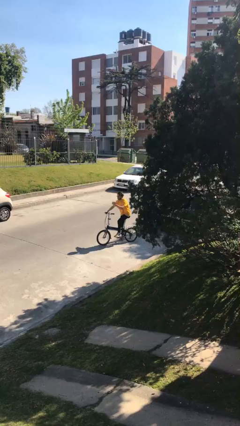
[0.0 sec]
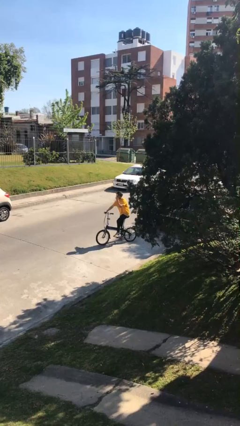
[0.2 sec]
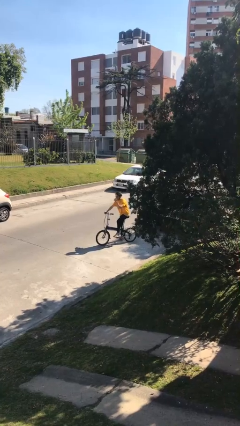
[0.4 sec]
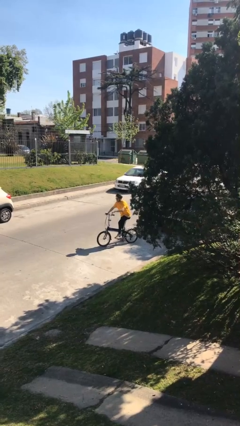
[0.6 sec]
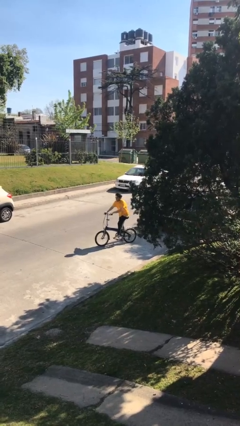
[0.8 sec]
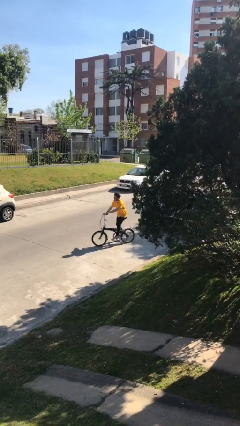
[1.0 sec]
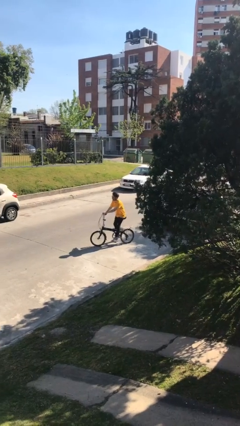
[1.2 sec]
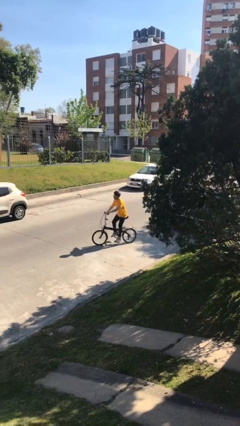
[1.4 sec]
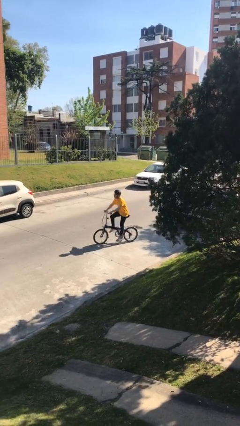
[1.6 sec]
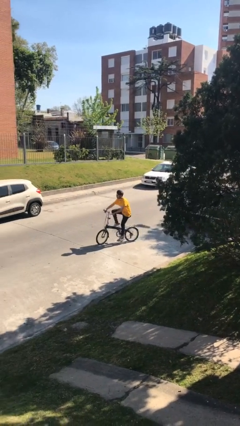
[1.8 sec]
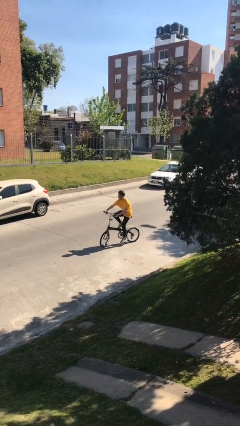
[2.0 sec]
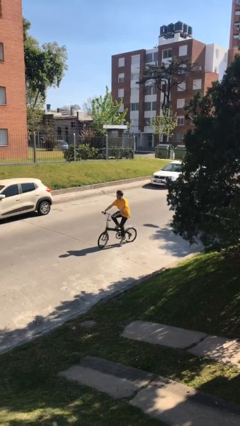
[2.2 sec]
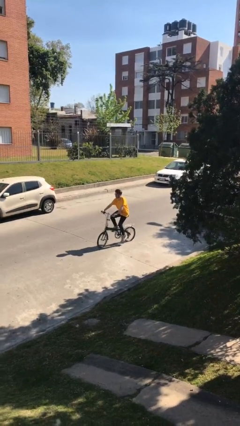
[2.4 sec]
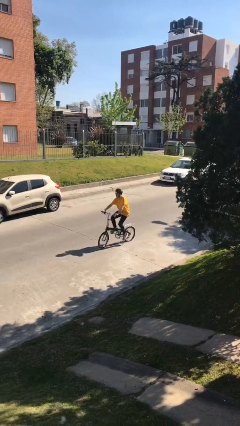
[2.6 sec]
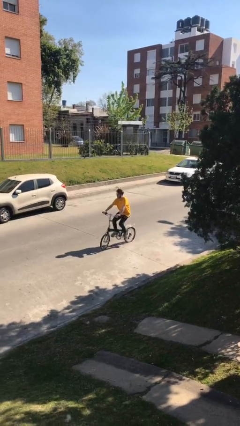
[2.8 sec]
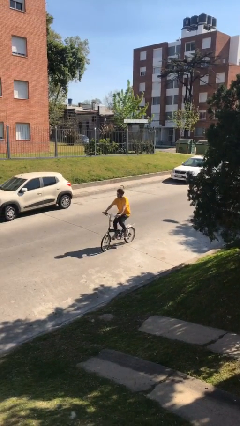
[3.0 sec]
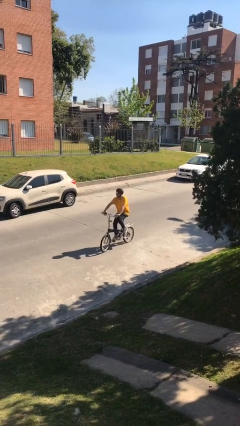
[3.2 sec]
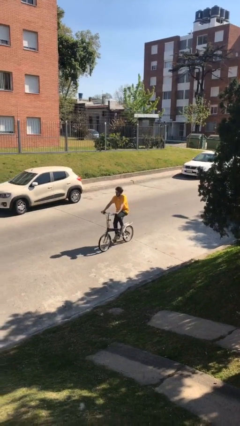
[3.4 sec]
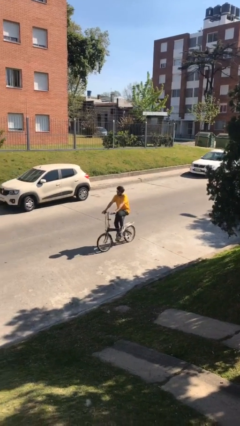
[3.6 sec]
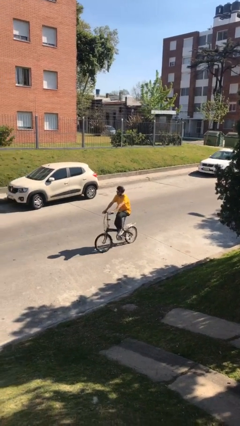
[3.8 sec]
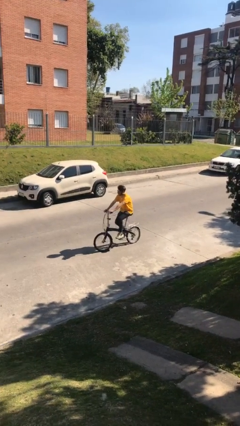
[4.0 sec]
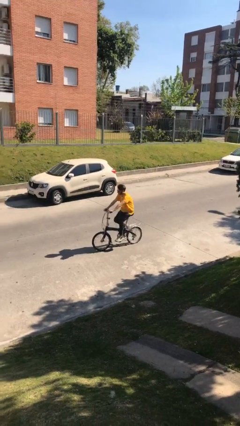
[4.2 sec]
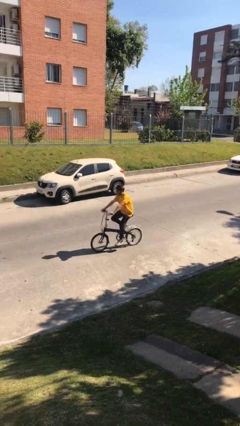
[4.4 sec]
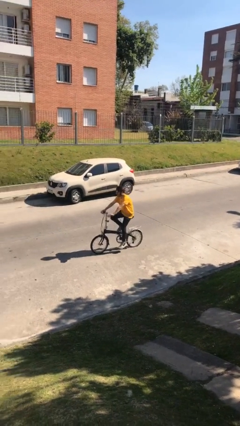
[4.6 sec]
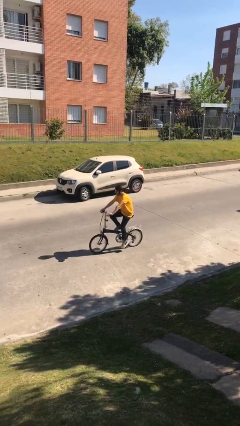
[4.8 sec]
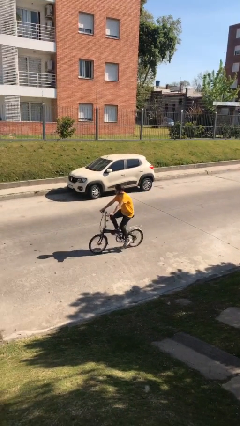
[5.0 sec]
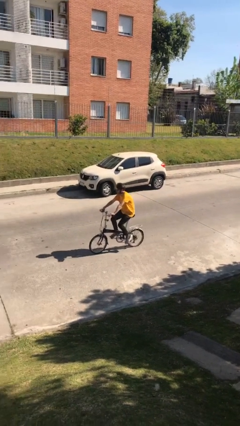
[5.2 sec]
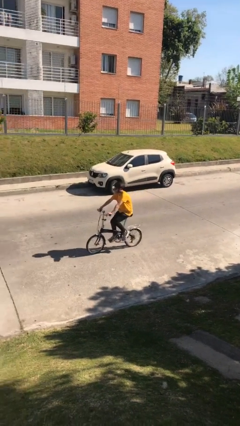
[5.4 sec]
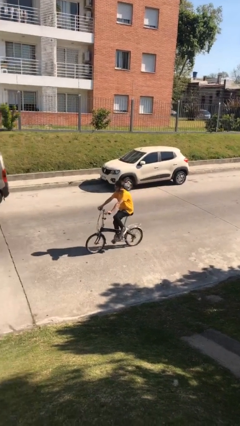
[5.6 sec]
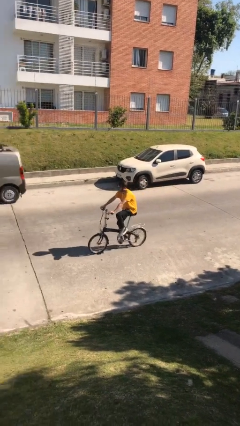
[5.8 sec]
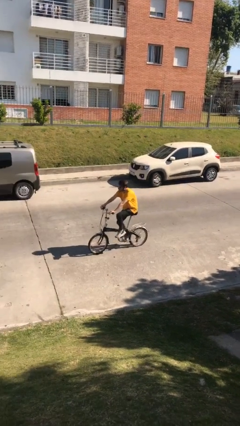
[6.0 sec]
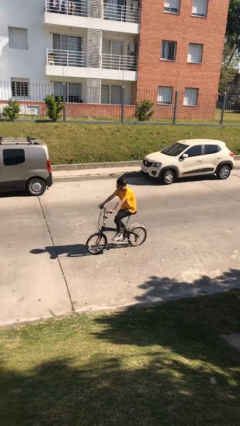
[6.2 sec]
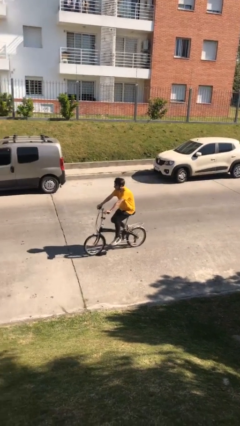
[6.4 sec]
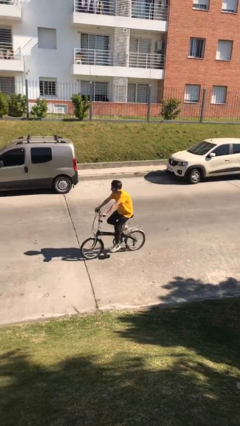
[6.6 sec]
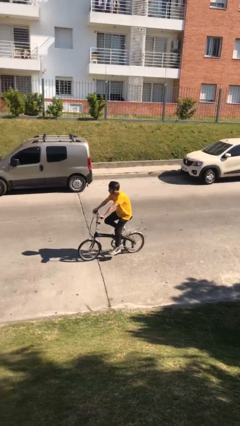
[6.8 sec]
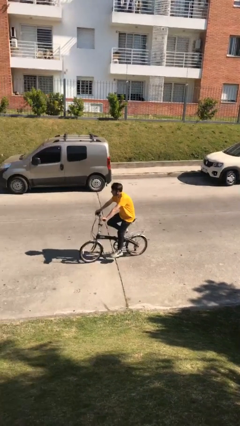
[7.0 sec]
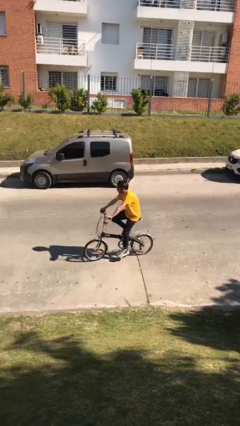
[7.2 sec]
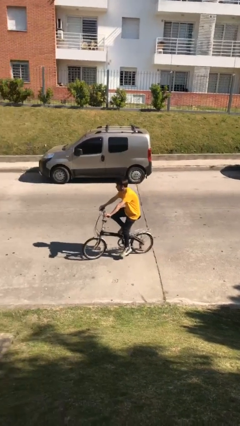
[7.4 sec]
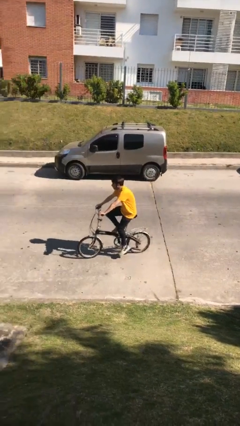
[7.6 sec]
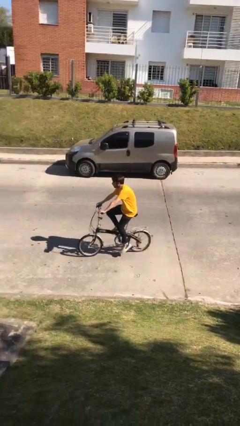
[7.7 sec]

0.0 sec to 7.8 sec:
person rides bicycle

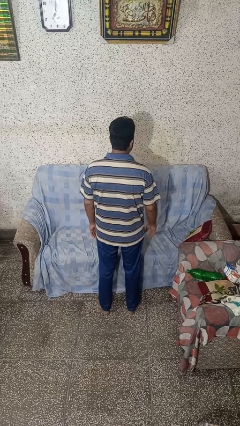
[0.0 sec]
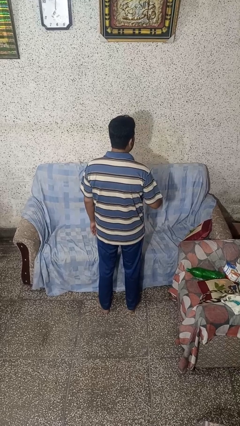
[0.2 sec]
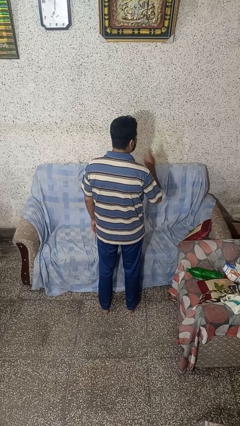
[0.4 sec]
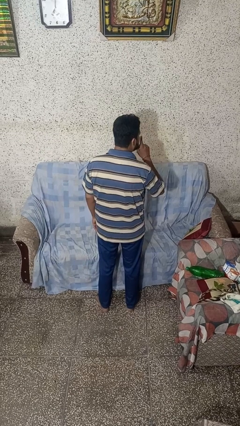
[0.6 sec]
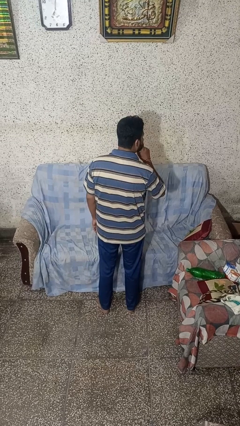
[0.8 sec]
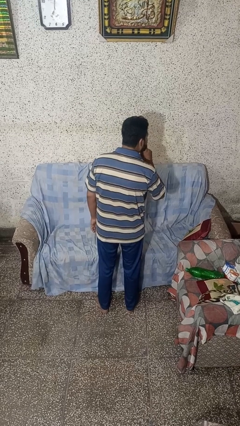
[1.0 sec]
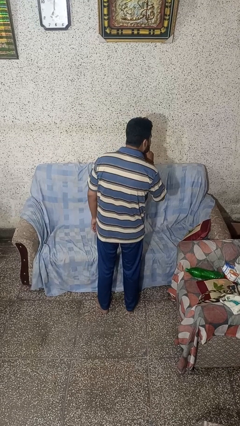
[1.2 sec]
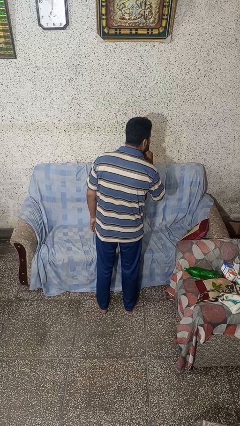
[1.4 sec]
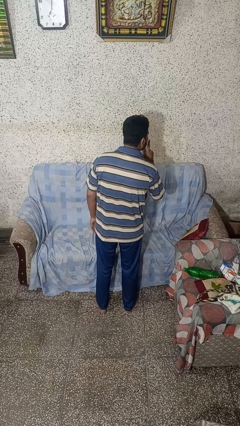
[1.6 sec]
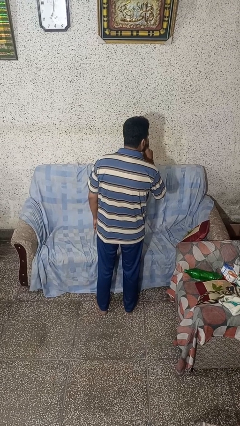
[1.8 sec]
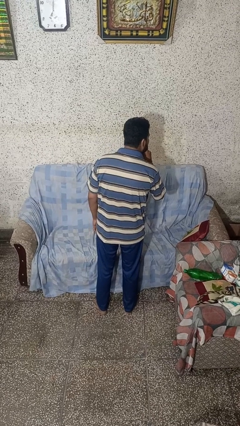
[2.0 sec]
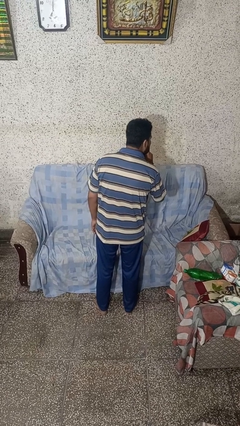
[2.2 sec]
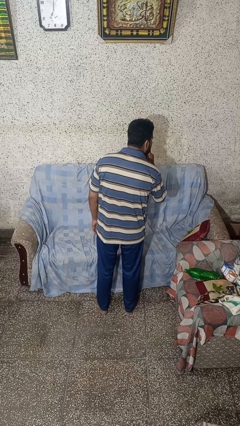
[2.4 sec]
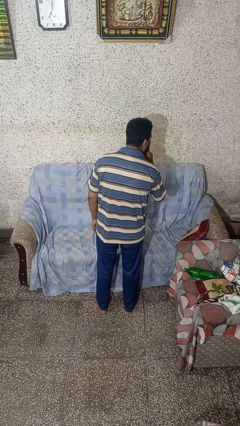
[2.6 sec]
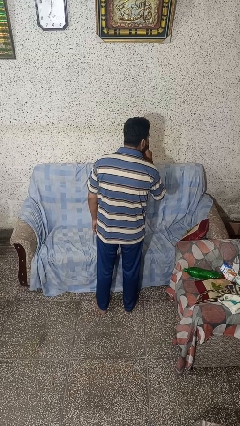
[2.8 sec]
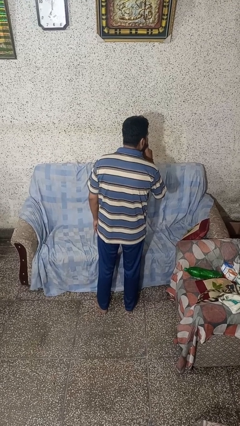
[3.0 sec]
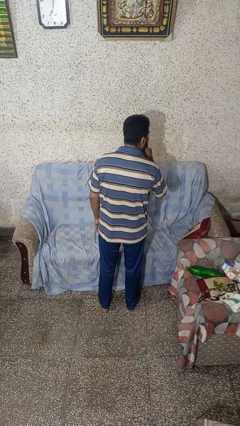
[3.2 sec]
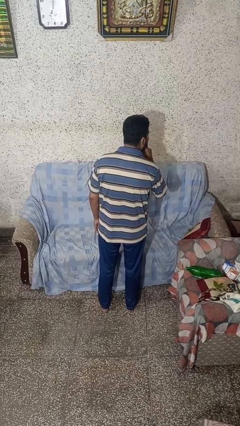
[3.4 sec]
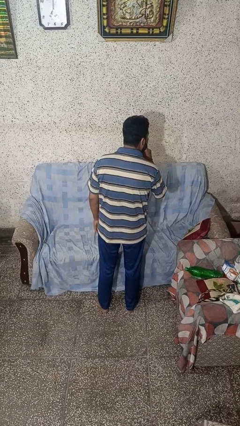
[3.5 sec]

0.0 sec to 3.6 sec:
person gestures be quiet

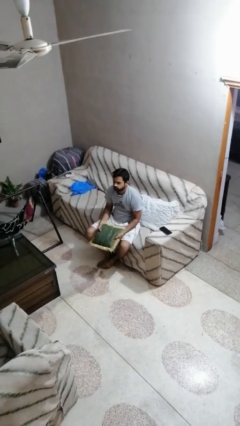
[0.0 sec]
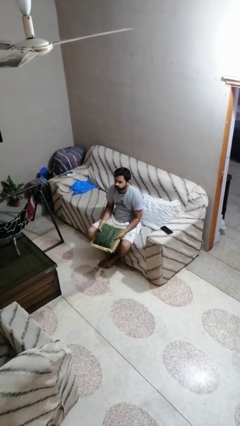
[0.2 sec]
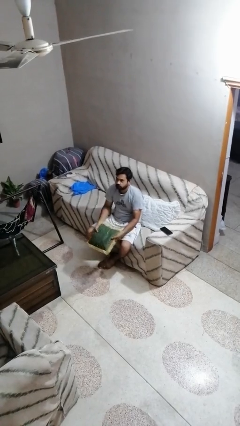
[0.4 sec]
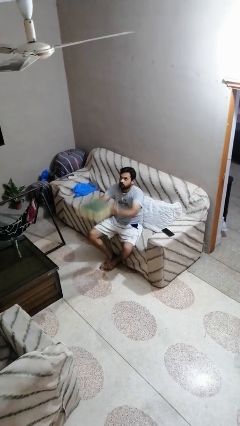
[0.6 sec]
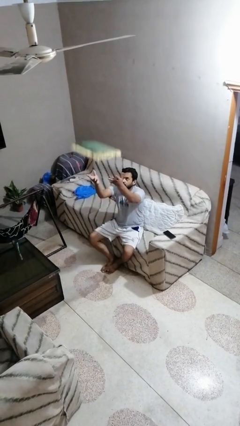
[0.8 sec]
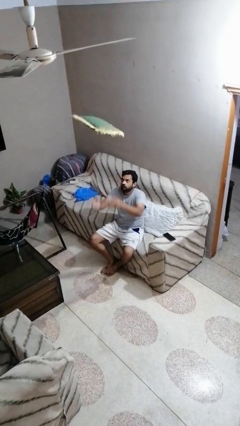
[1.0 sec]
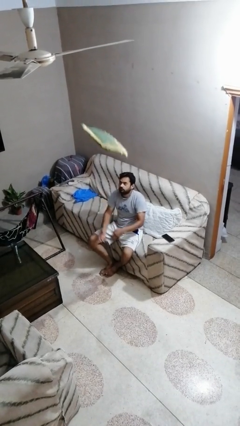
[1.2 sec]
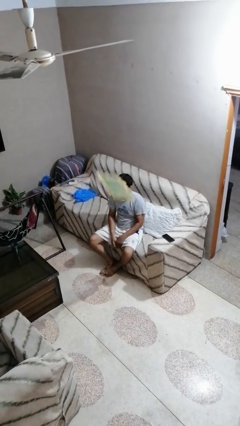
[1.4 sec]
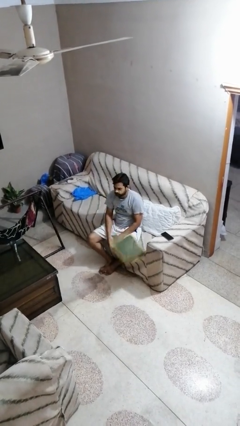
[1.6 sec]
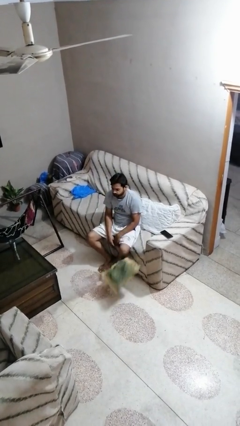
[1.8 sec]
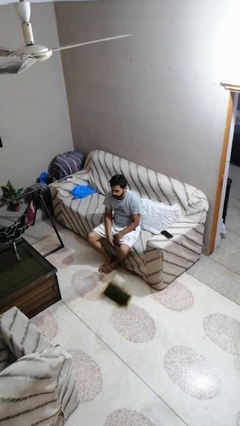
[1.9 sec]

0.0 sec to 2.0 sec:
person throws object into air

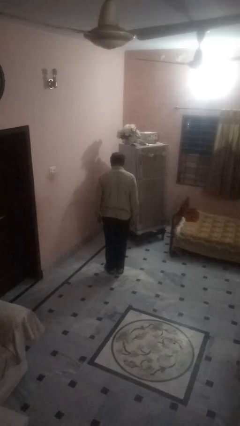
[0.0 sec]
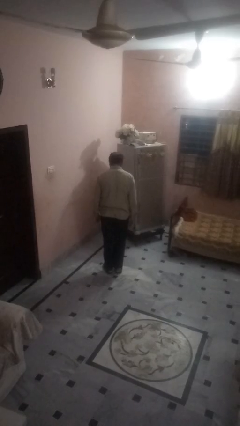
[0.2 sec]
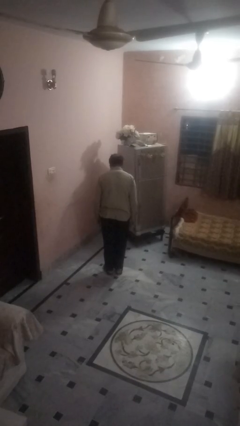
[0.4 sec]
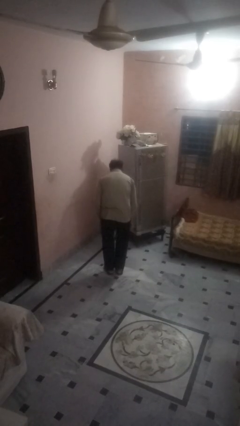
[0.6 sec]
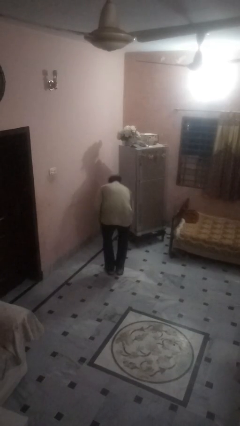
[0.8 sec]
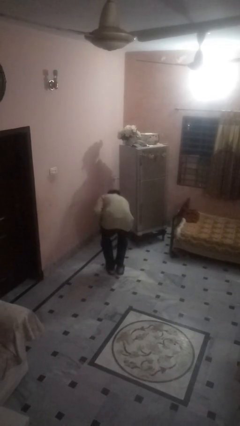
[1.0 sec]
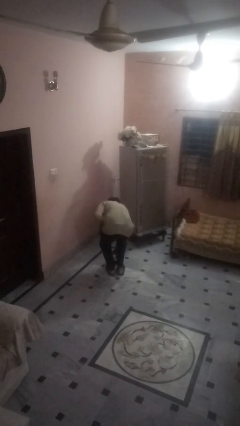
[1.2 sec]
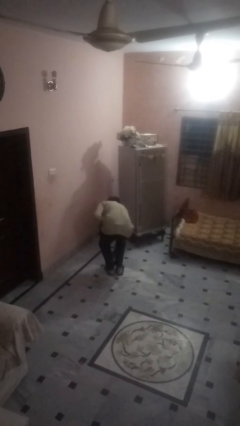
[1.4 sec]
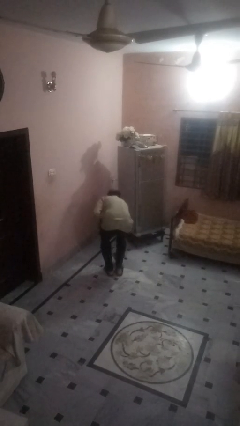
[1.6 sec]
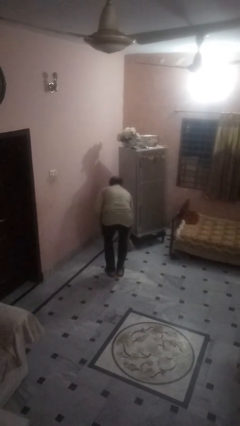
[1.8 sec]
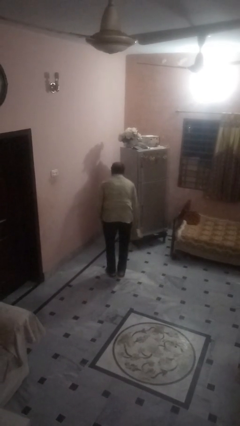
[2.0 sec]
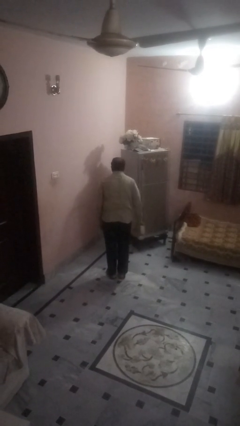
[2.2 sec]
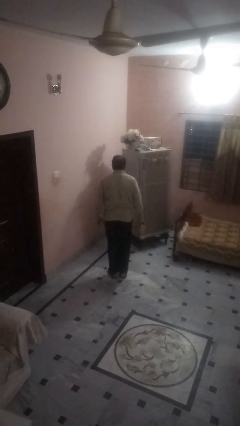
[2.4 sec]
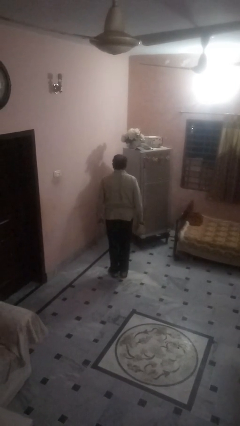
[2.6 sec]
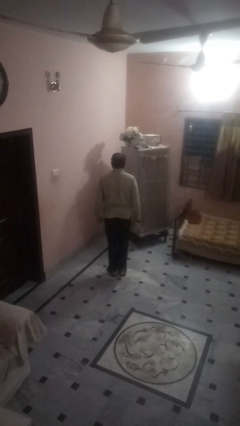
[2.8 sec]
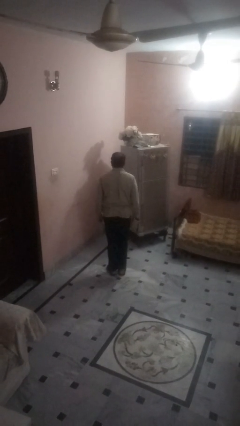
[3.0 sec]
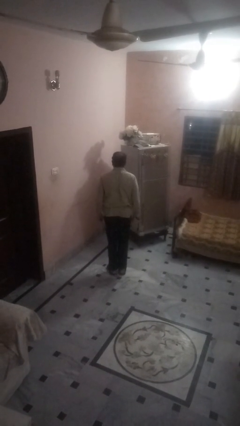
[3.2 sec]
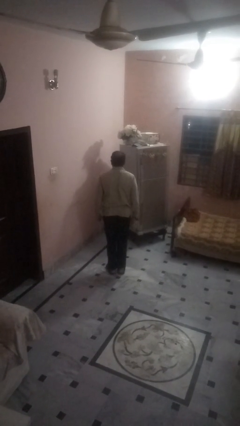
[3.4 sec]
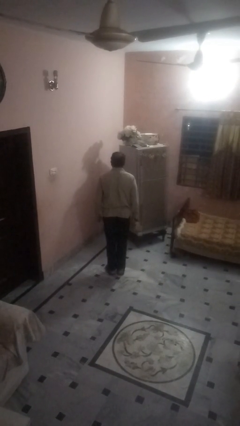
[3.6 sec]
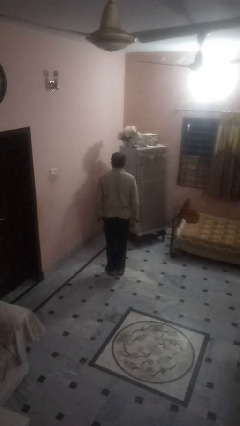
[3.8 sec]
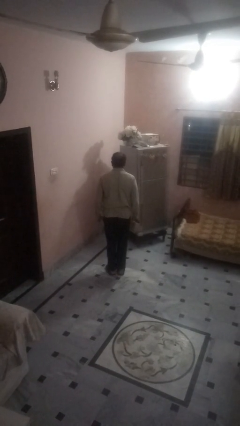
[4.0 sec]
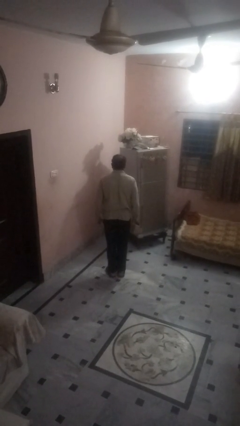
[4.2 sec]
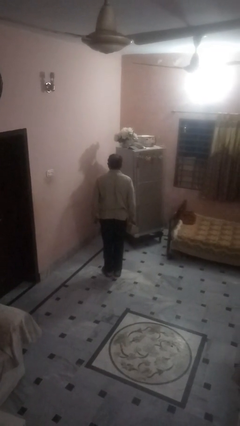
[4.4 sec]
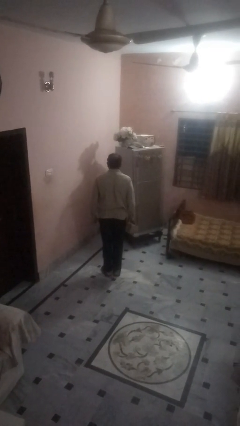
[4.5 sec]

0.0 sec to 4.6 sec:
person picks up object from floor
